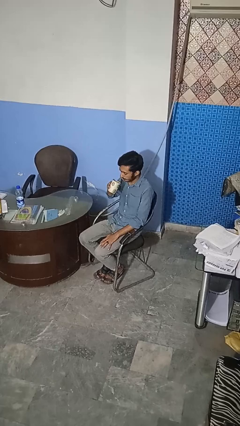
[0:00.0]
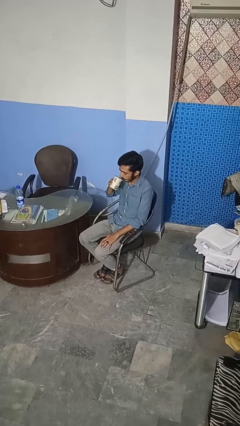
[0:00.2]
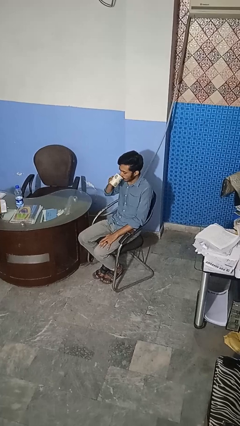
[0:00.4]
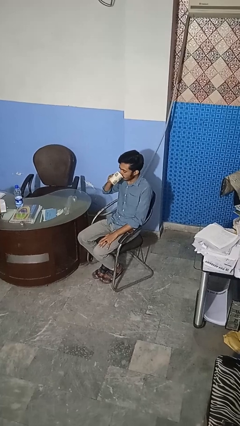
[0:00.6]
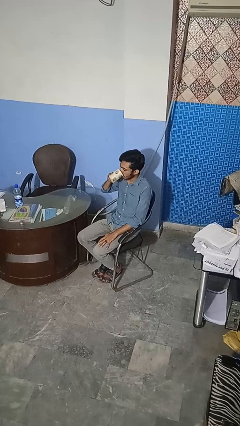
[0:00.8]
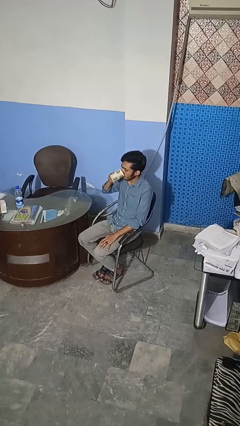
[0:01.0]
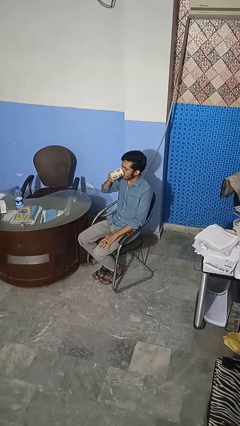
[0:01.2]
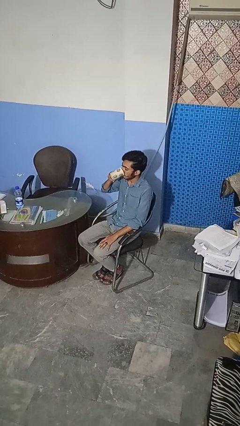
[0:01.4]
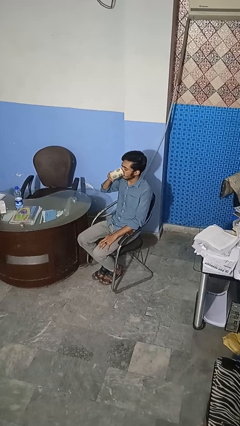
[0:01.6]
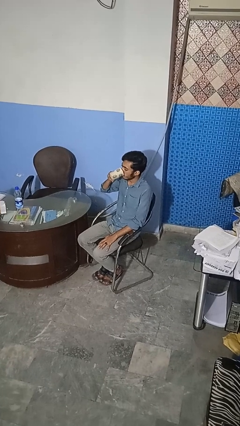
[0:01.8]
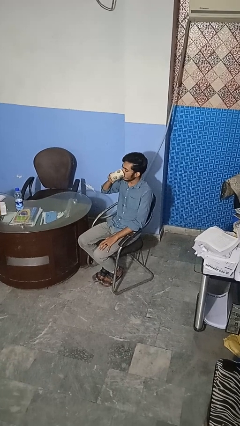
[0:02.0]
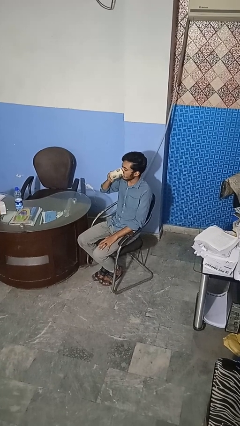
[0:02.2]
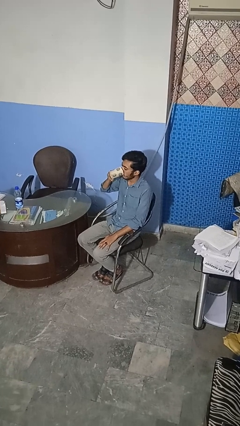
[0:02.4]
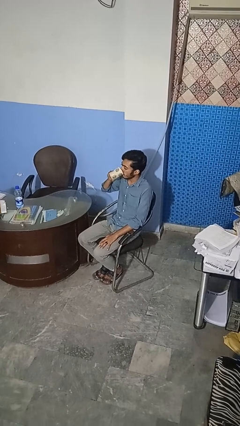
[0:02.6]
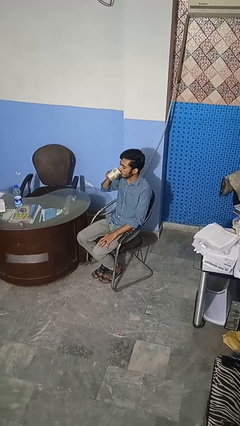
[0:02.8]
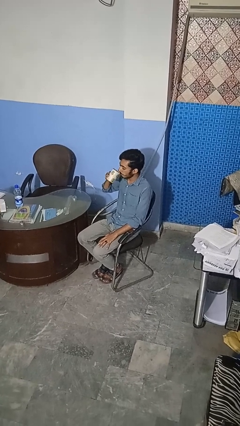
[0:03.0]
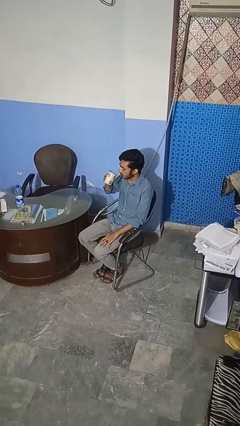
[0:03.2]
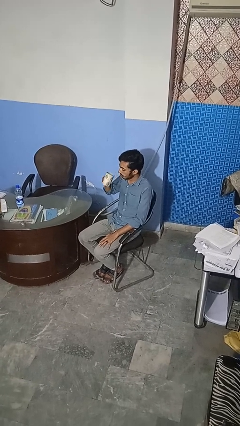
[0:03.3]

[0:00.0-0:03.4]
person drinks from mug

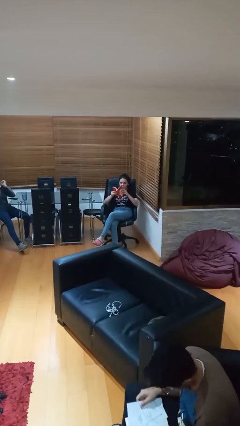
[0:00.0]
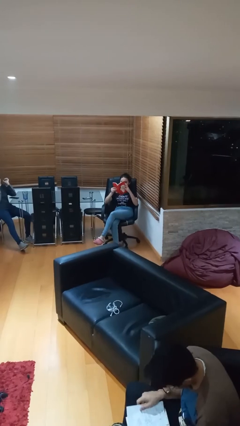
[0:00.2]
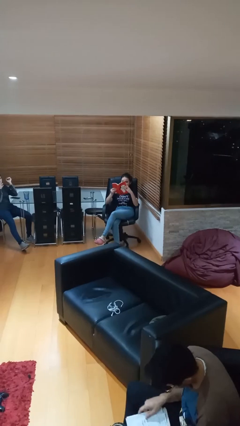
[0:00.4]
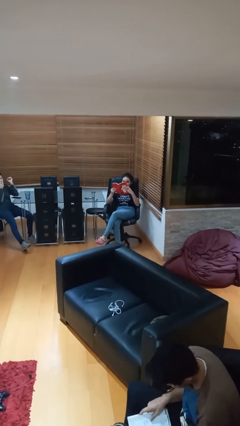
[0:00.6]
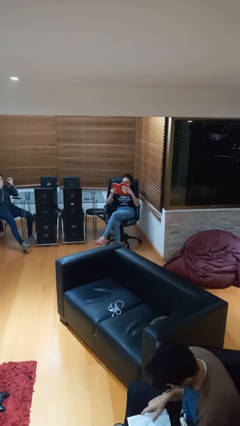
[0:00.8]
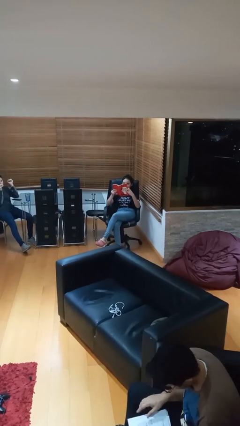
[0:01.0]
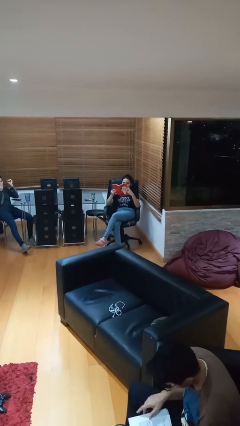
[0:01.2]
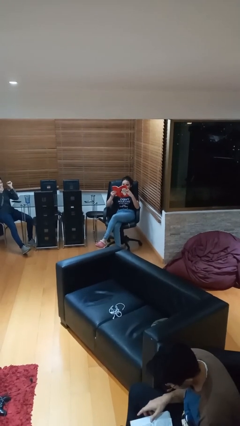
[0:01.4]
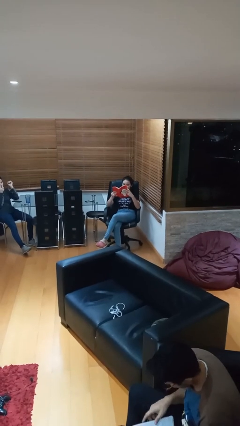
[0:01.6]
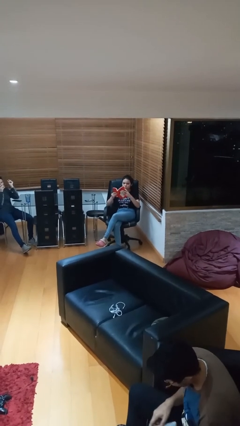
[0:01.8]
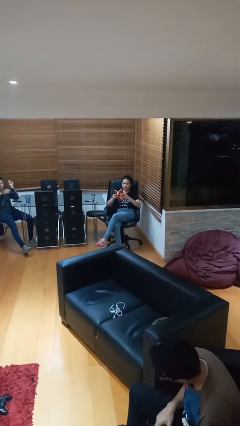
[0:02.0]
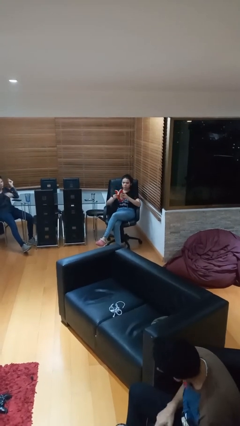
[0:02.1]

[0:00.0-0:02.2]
person reads document

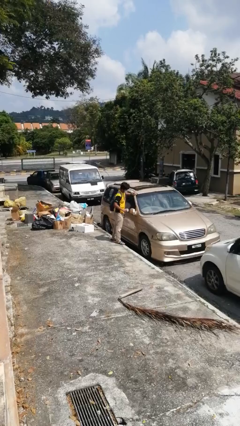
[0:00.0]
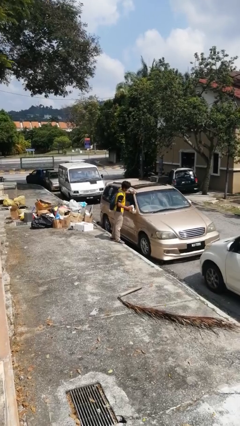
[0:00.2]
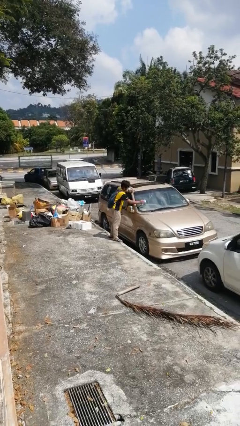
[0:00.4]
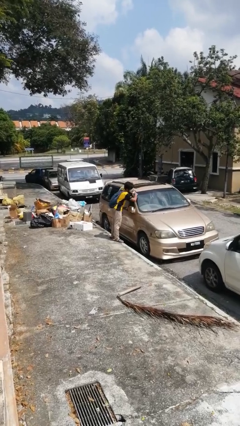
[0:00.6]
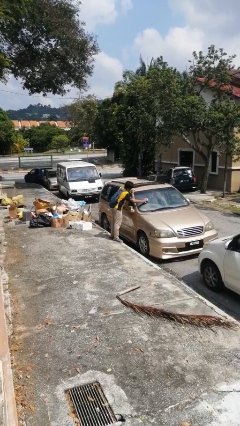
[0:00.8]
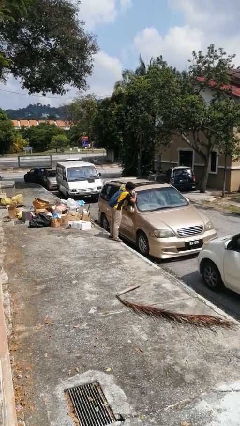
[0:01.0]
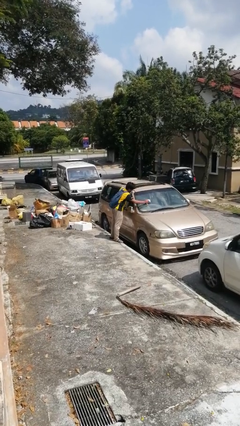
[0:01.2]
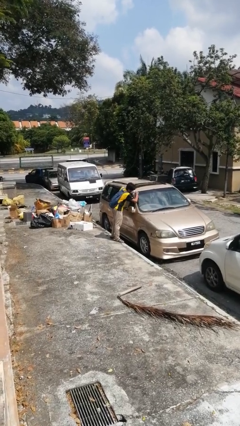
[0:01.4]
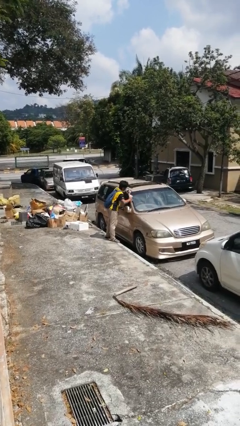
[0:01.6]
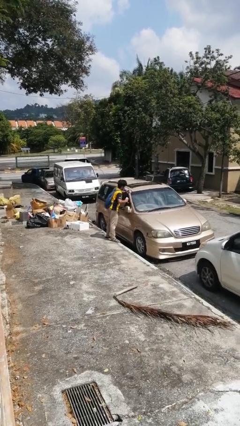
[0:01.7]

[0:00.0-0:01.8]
person polishes car with rag

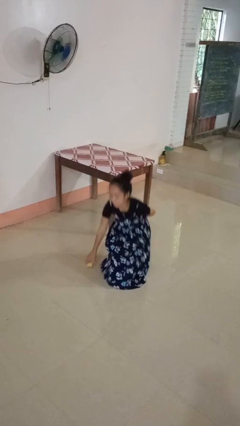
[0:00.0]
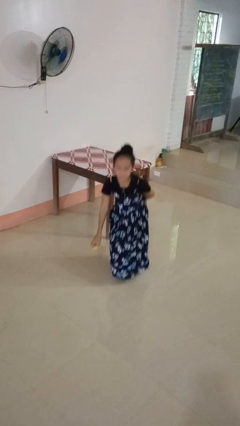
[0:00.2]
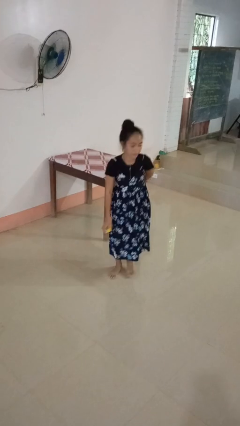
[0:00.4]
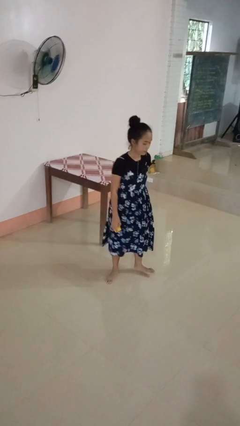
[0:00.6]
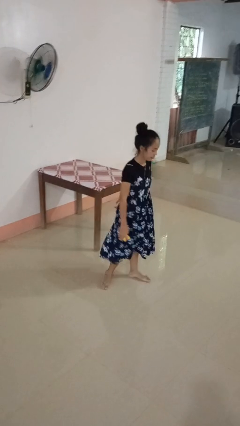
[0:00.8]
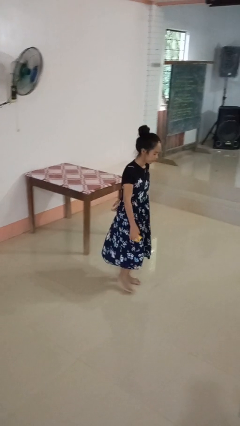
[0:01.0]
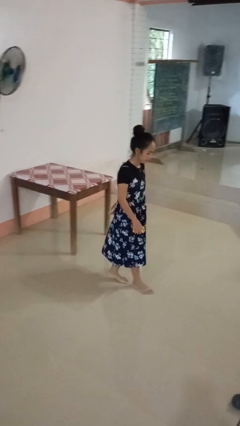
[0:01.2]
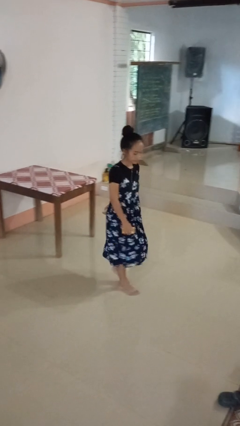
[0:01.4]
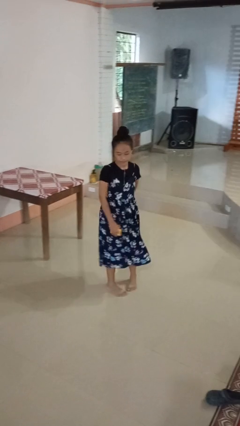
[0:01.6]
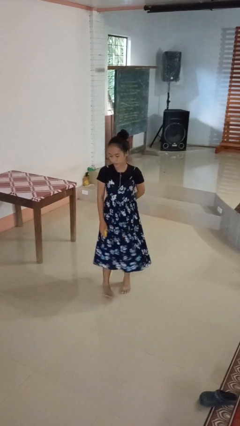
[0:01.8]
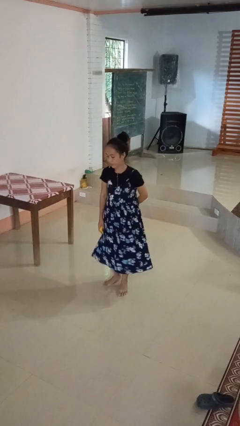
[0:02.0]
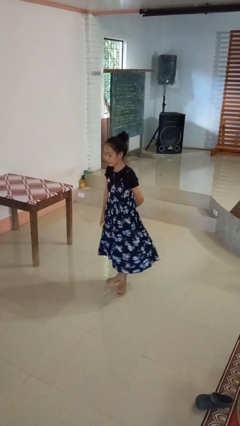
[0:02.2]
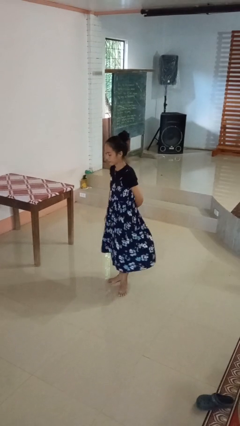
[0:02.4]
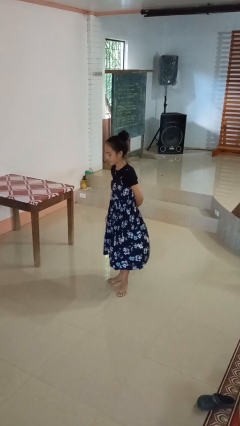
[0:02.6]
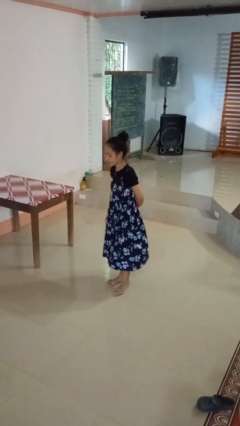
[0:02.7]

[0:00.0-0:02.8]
person picks up object from floor

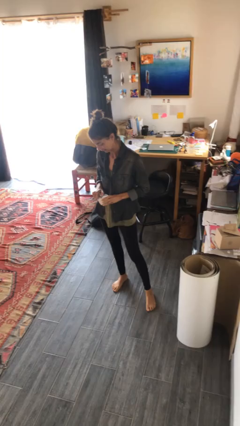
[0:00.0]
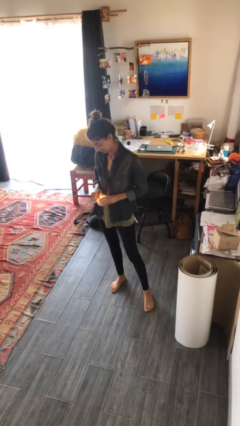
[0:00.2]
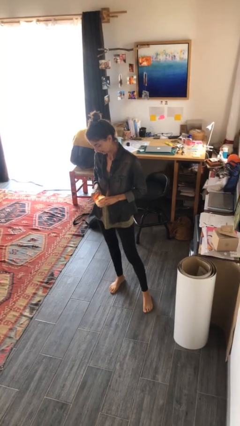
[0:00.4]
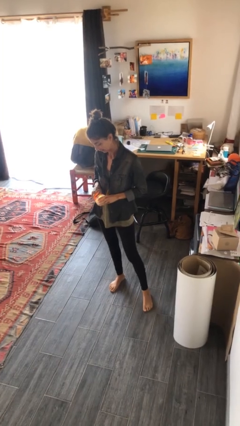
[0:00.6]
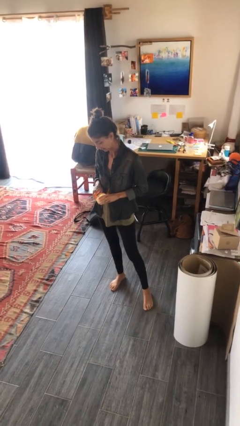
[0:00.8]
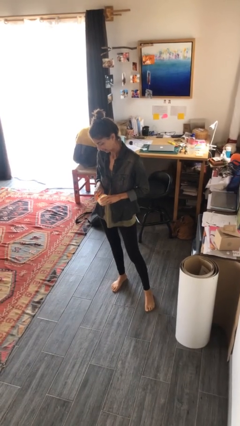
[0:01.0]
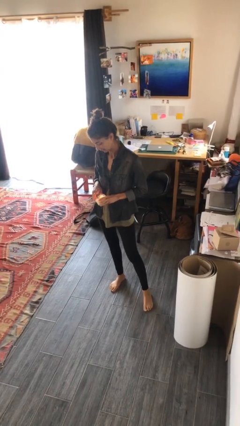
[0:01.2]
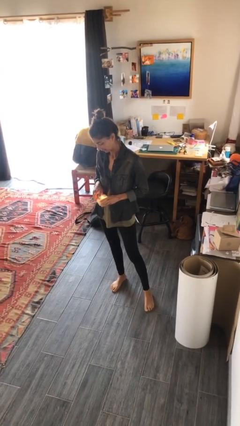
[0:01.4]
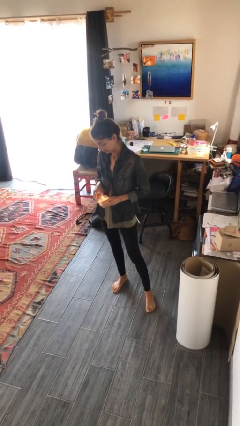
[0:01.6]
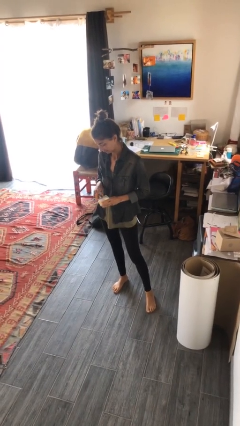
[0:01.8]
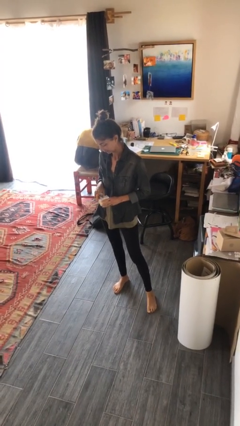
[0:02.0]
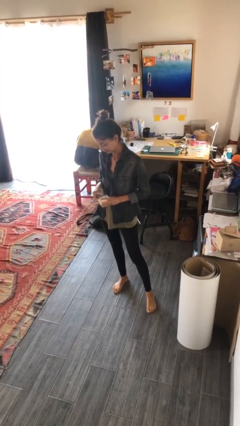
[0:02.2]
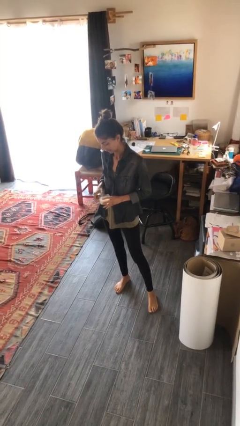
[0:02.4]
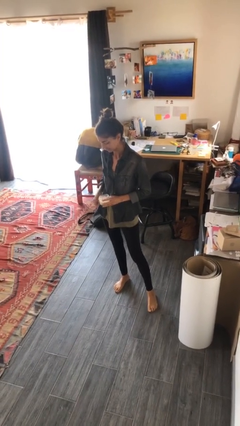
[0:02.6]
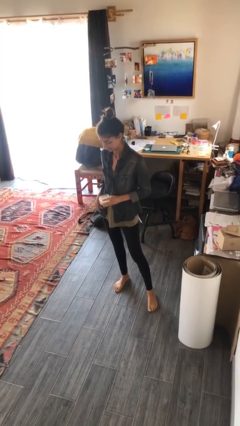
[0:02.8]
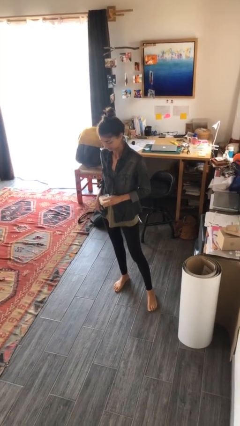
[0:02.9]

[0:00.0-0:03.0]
person lights candle

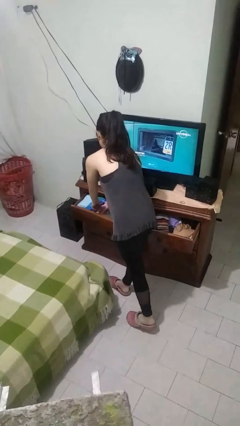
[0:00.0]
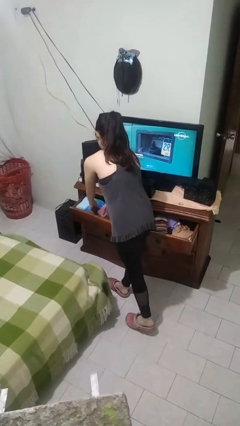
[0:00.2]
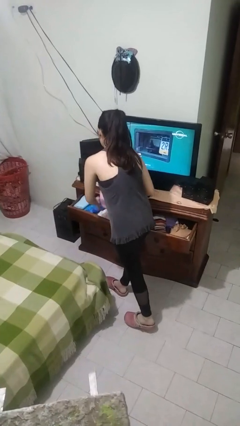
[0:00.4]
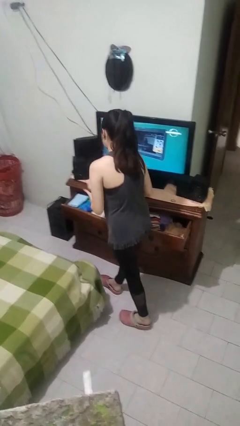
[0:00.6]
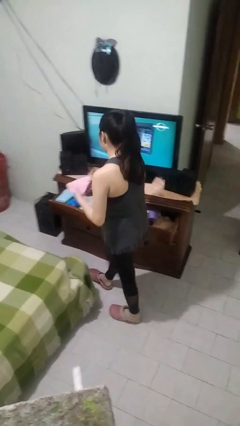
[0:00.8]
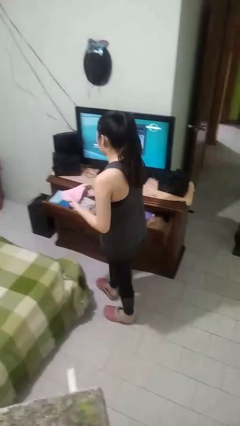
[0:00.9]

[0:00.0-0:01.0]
person takes clothes from dresser

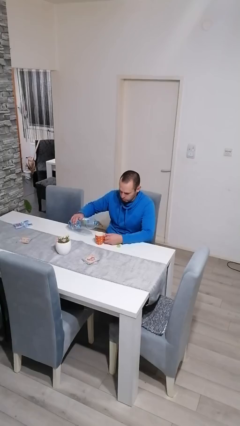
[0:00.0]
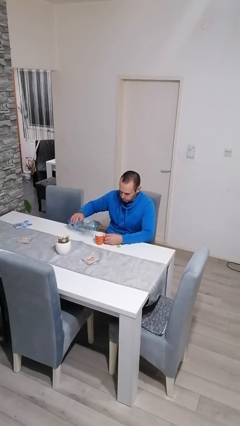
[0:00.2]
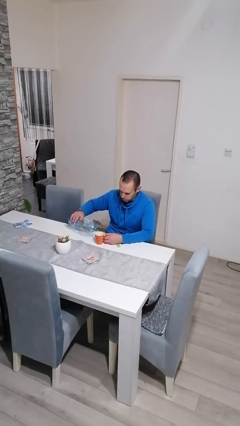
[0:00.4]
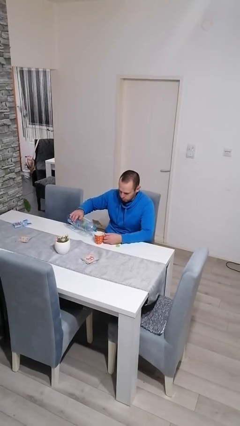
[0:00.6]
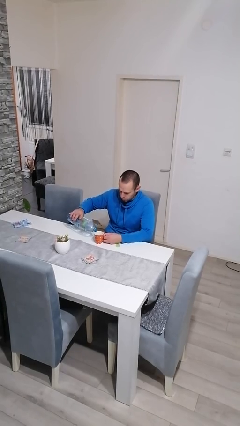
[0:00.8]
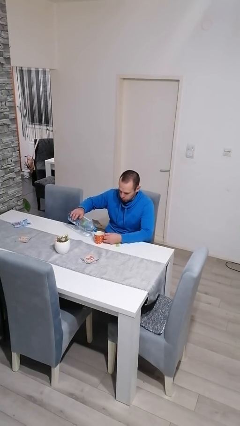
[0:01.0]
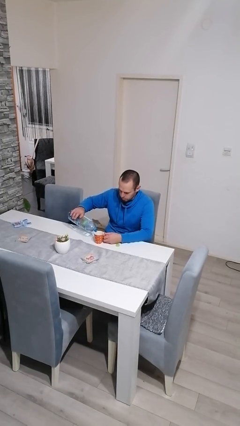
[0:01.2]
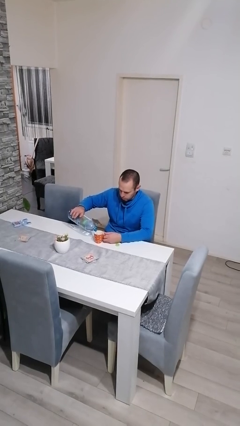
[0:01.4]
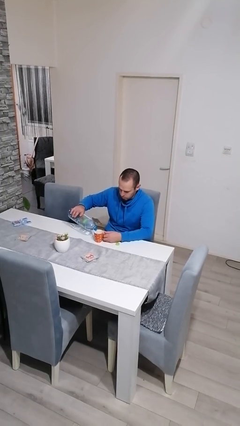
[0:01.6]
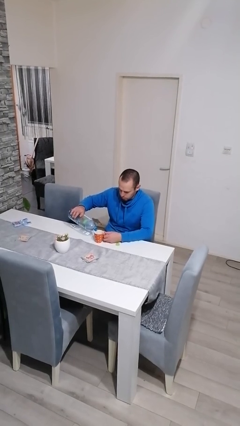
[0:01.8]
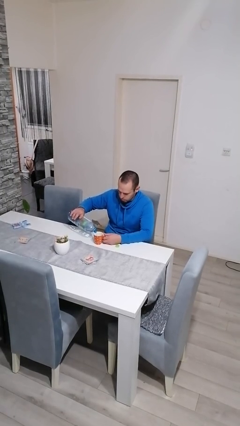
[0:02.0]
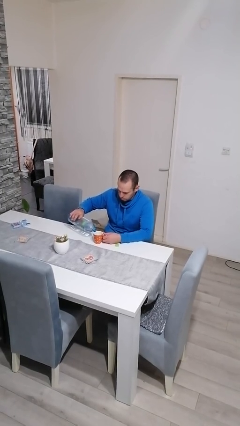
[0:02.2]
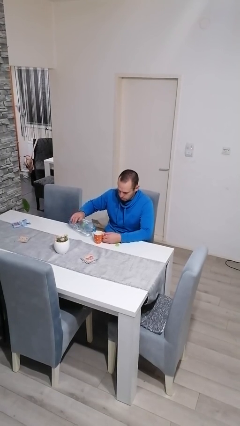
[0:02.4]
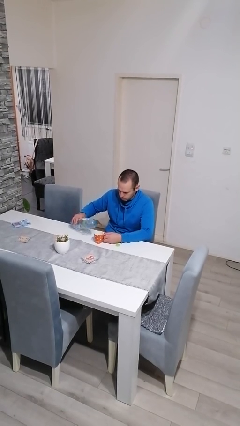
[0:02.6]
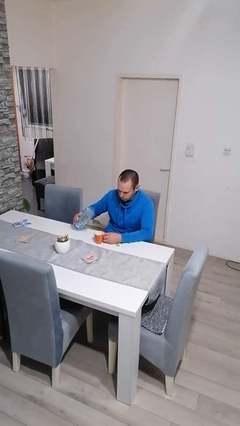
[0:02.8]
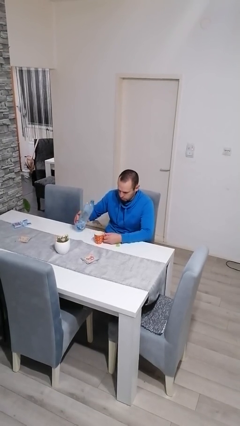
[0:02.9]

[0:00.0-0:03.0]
person pours liquid into cup
